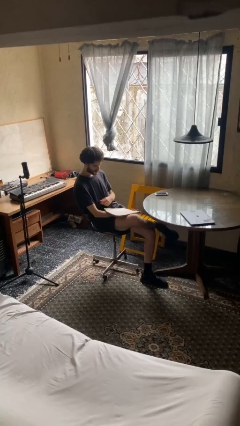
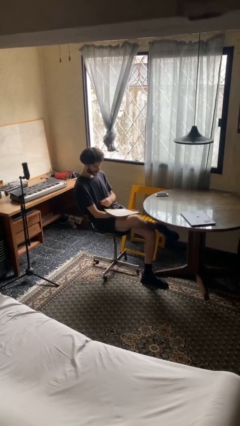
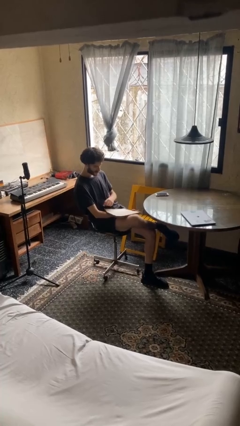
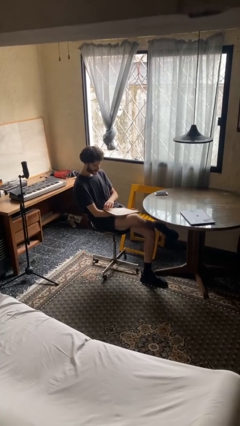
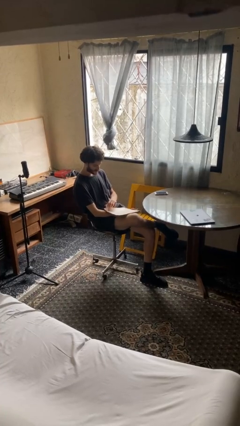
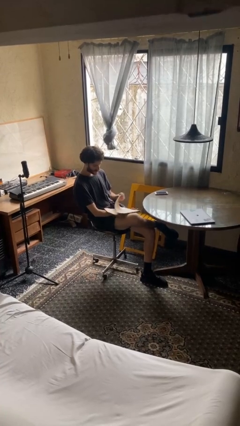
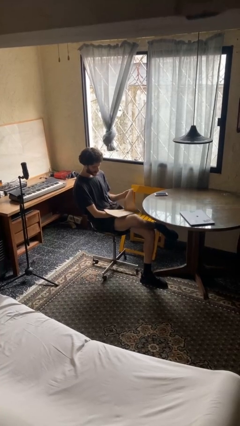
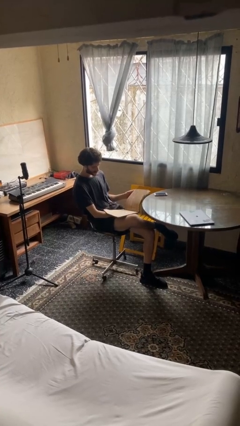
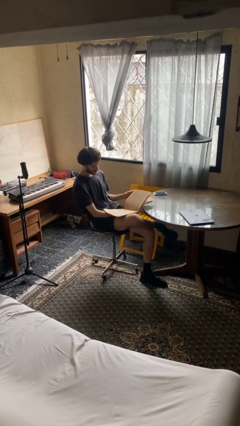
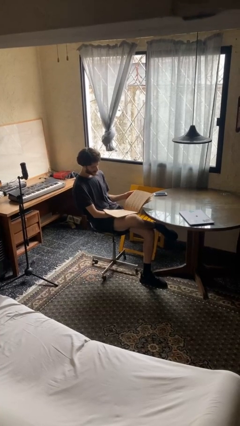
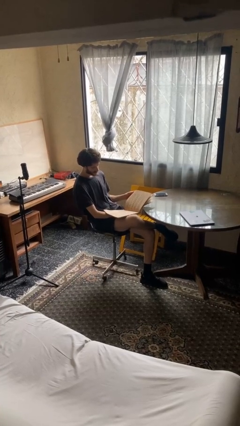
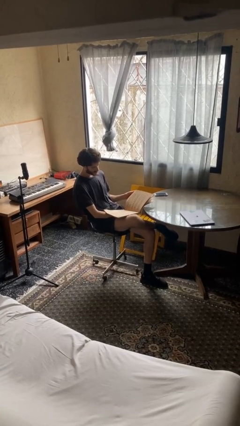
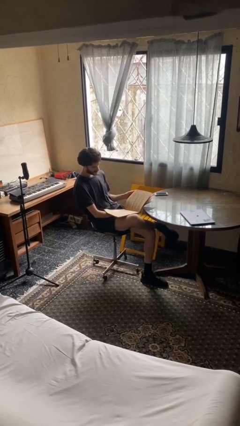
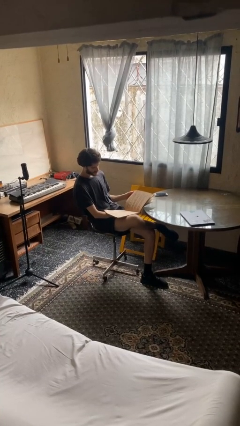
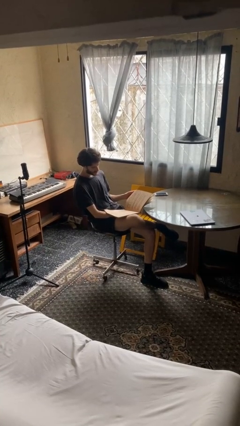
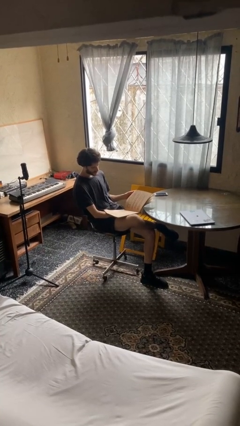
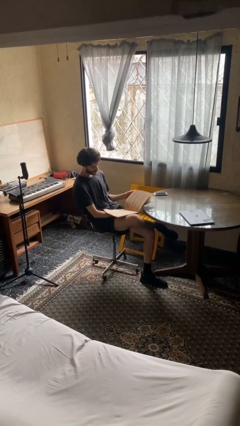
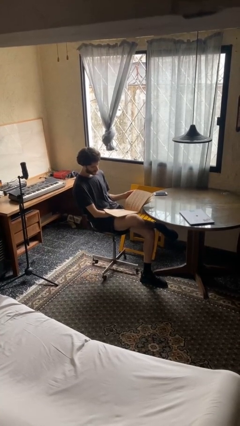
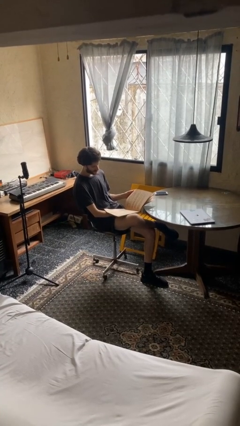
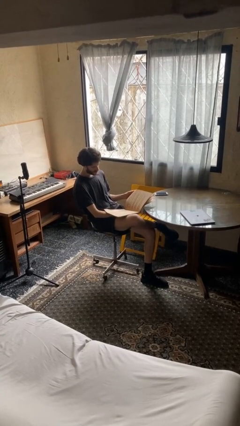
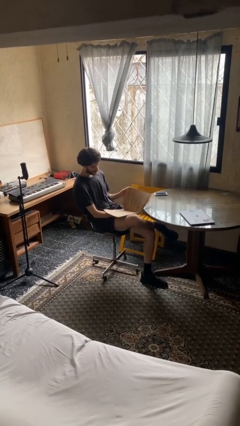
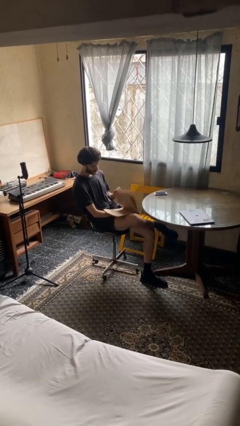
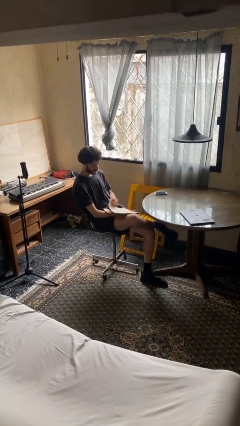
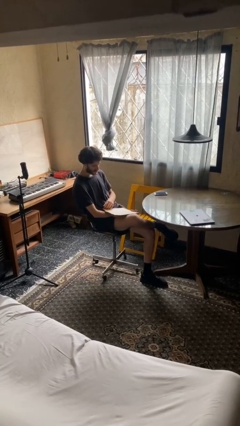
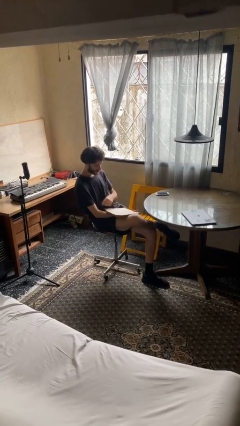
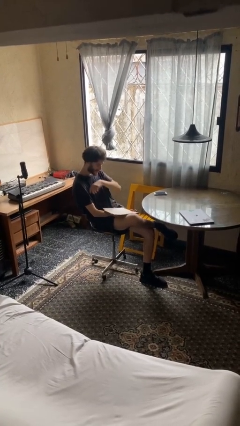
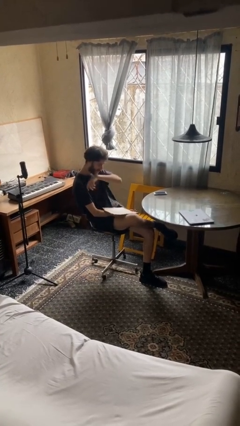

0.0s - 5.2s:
person reads document

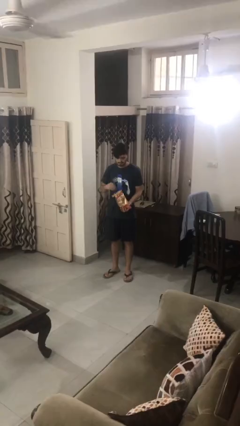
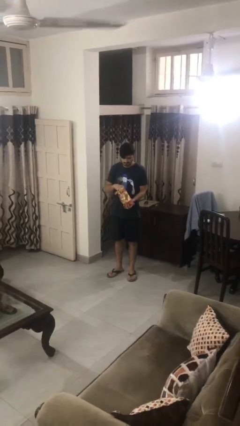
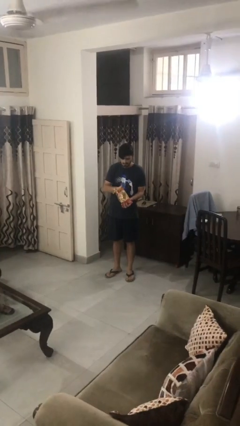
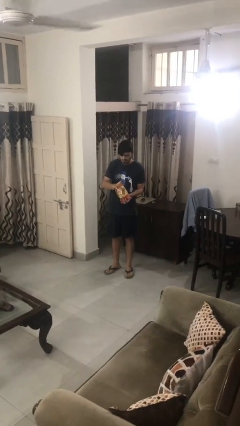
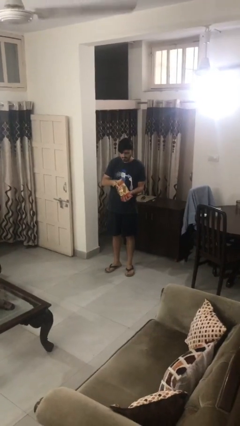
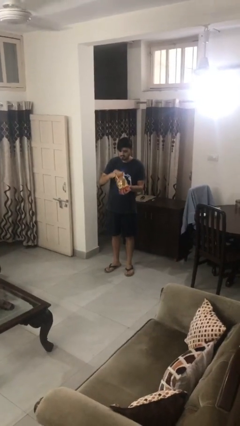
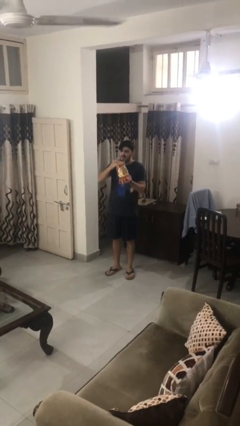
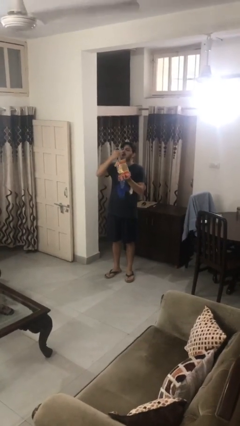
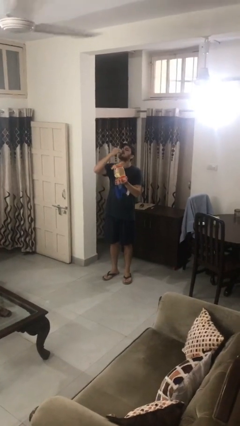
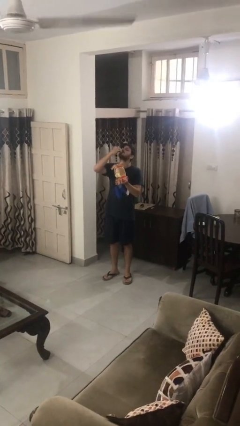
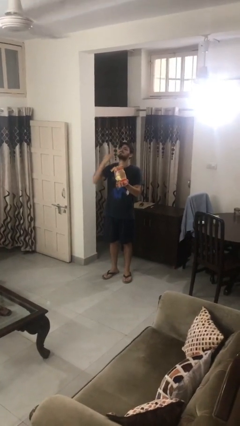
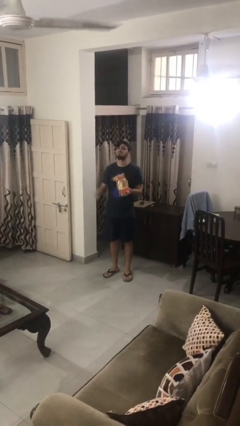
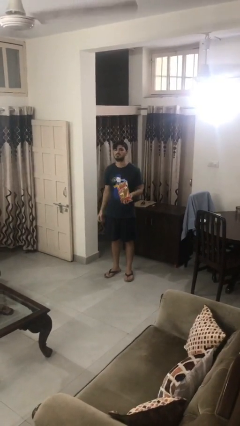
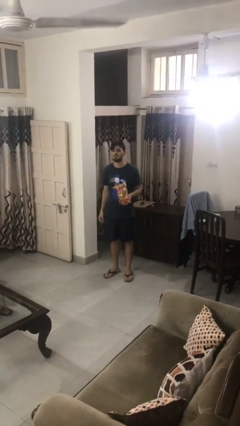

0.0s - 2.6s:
person eats snack from bag

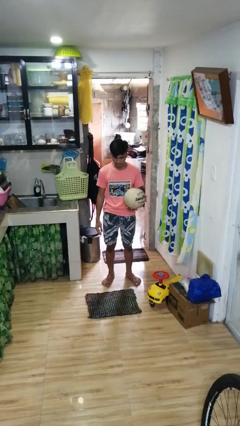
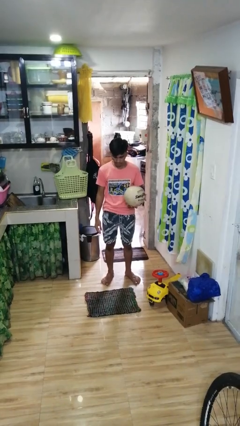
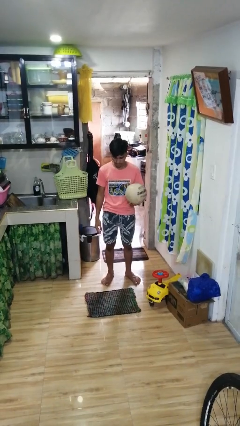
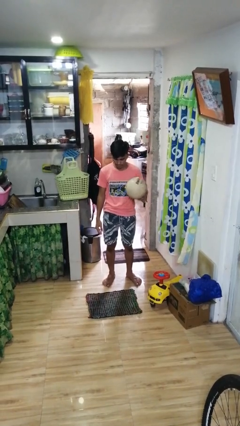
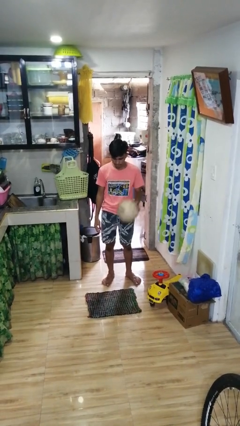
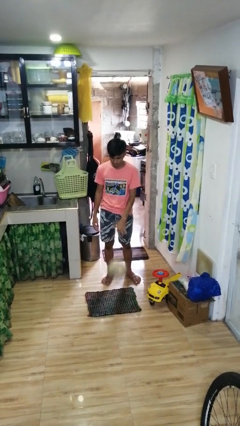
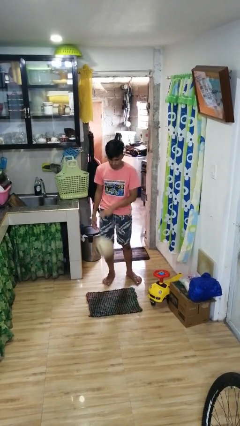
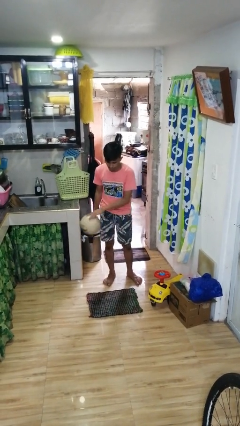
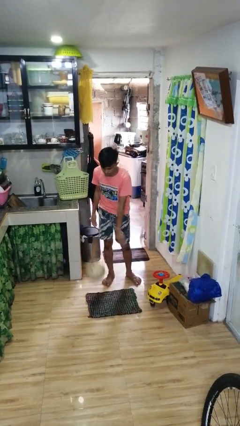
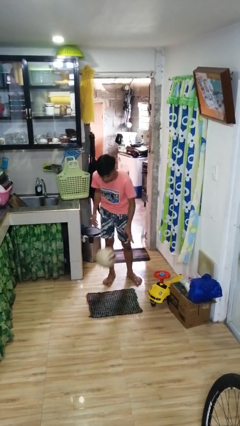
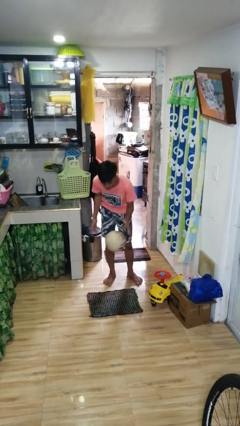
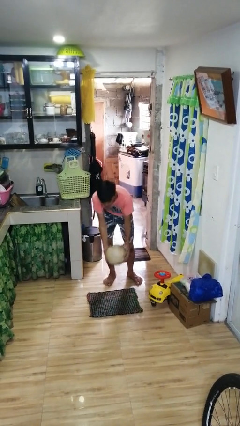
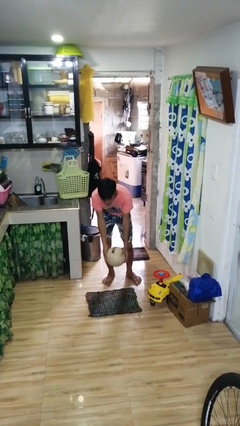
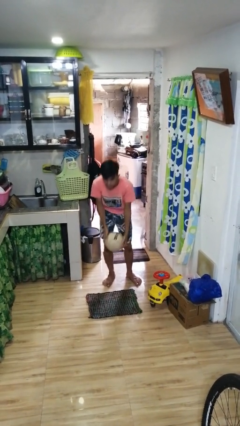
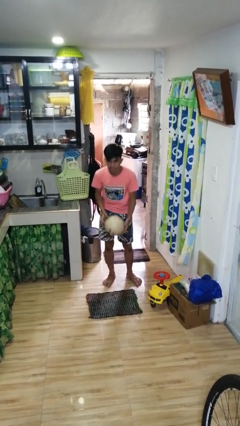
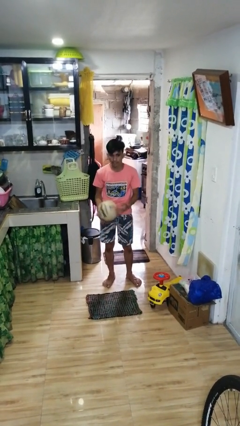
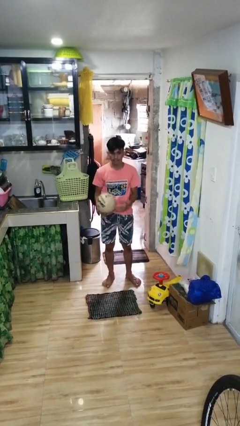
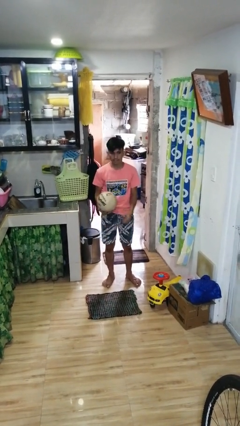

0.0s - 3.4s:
person bounces ball on floor

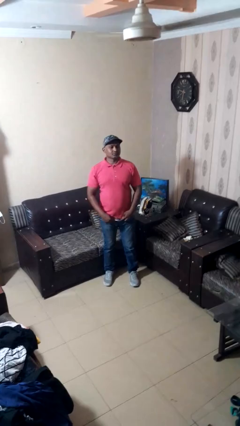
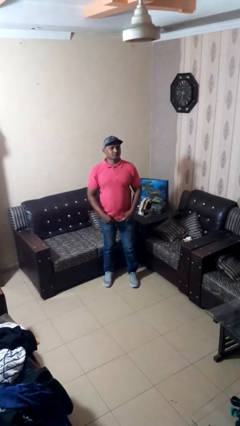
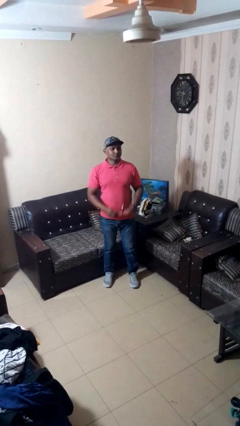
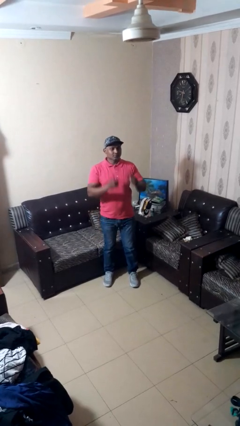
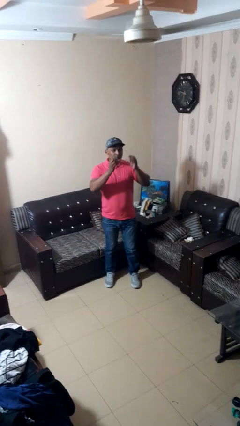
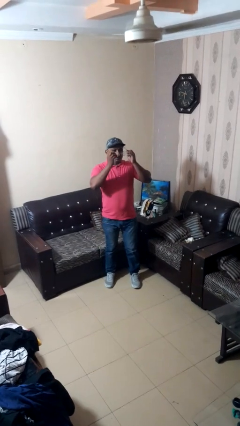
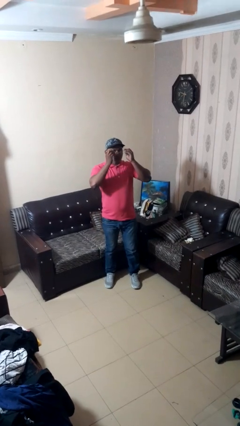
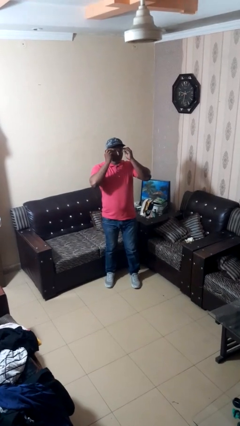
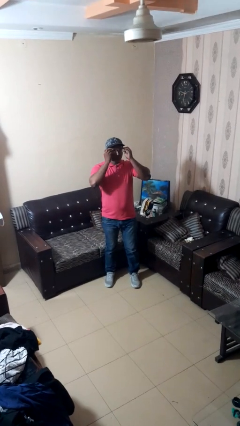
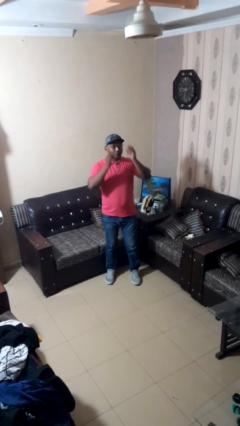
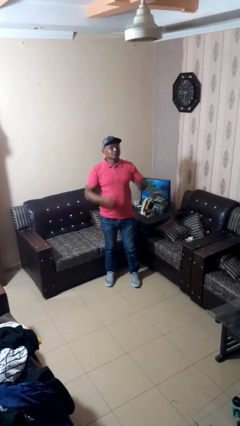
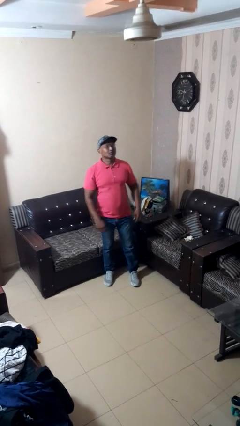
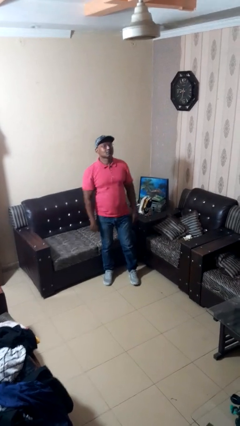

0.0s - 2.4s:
person puts on glasses

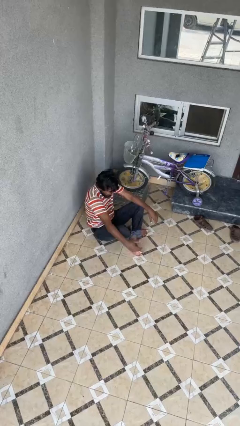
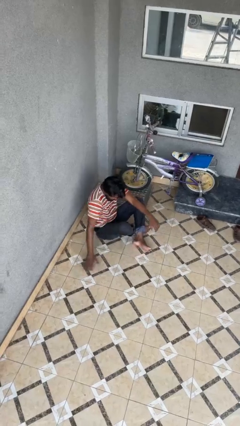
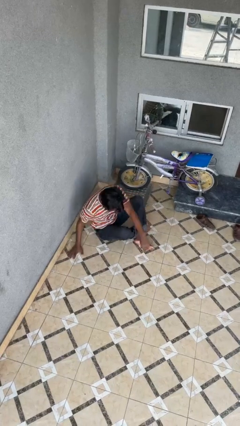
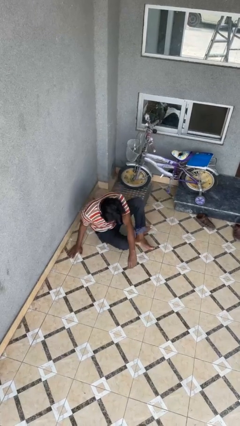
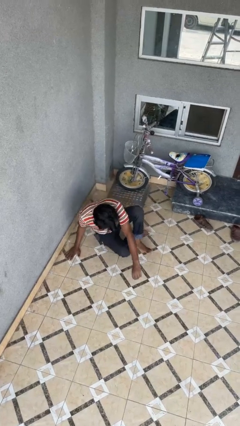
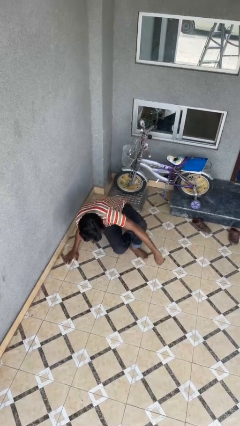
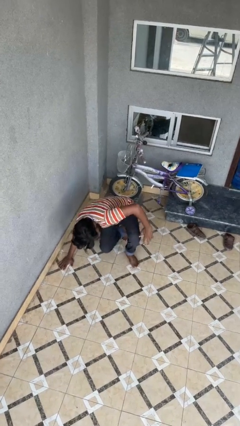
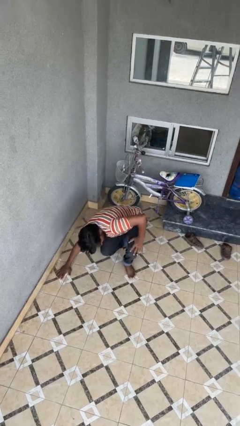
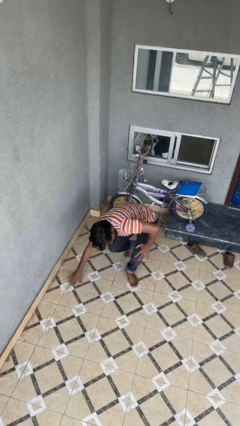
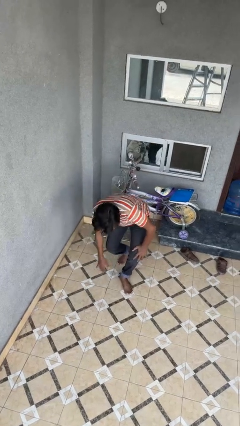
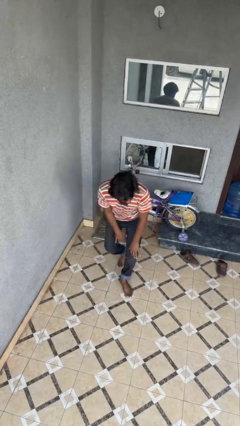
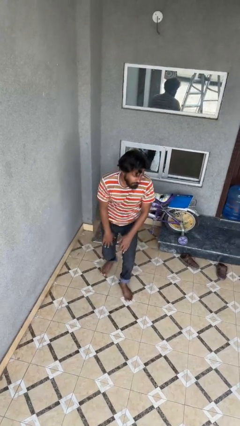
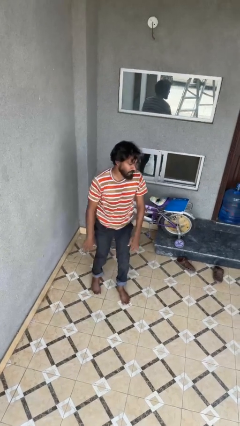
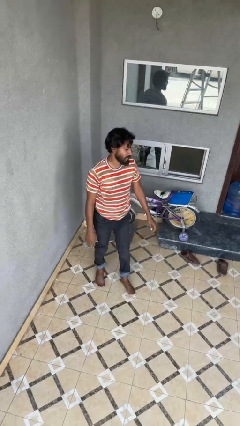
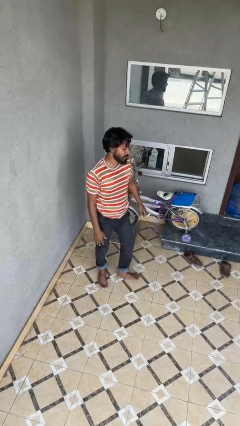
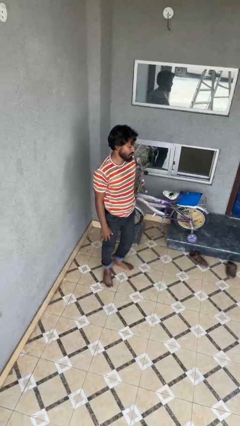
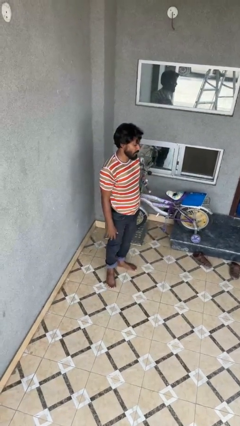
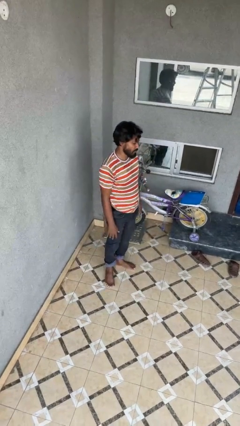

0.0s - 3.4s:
person stands up from floor

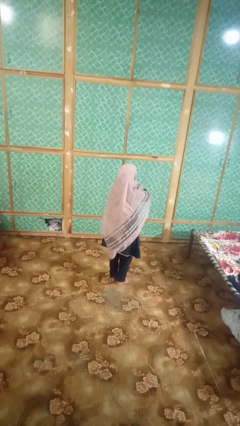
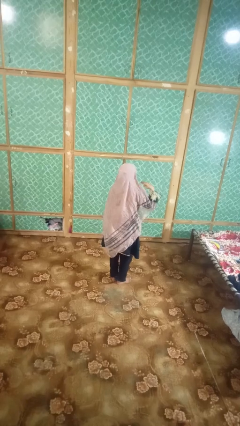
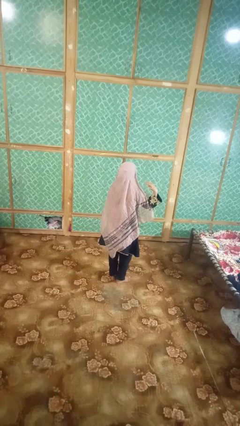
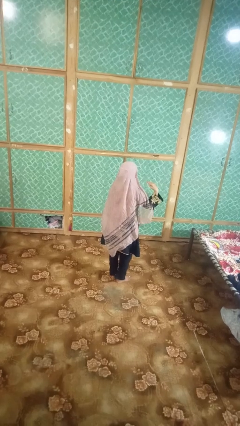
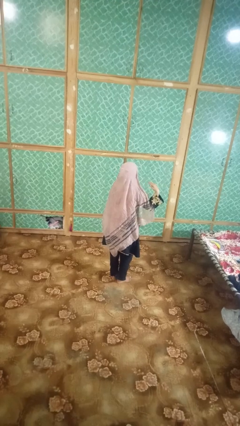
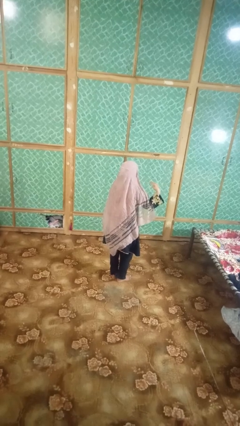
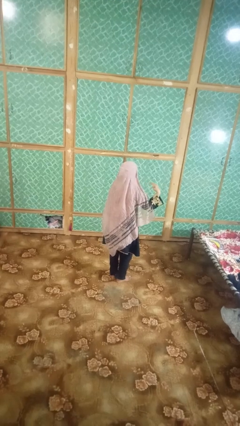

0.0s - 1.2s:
person gestures cut
